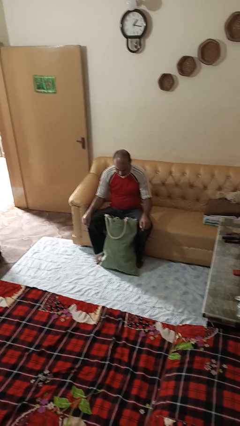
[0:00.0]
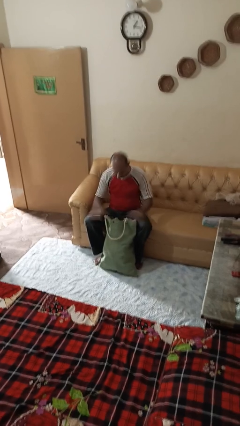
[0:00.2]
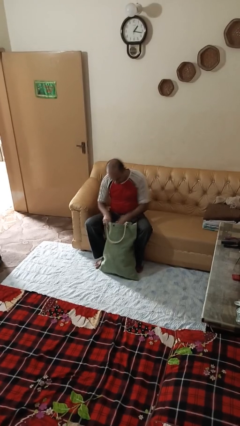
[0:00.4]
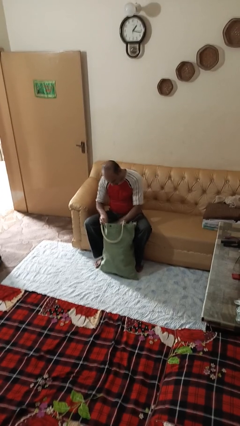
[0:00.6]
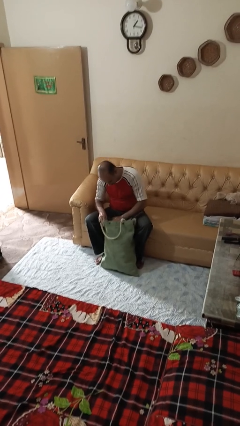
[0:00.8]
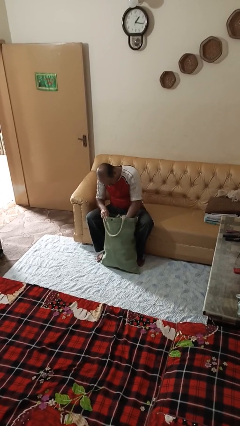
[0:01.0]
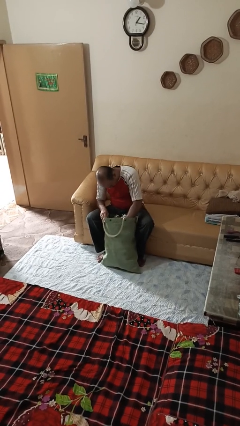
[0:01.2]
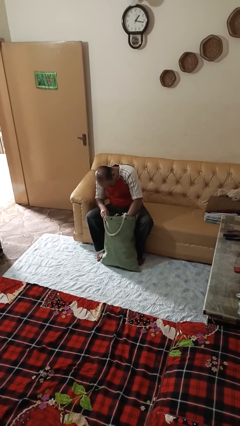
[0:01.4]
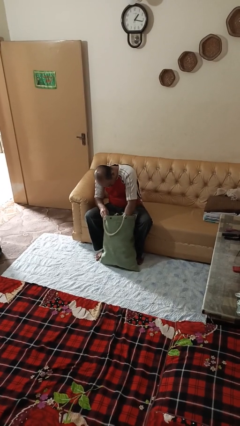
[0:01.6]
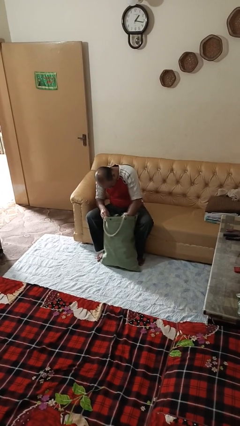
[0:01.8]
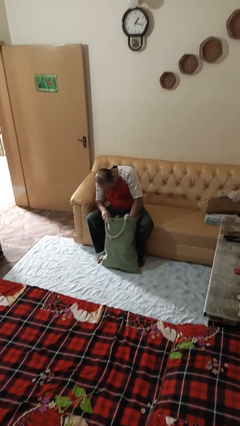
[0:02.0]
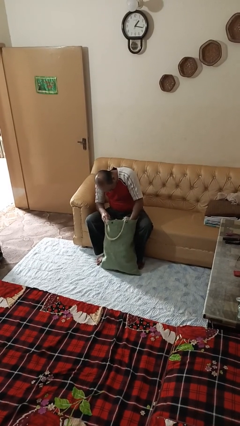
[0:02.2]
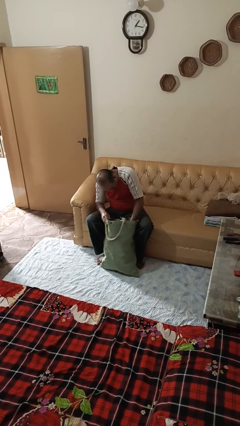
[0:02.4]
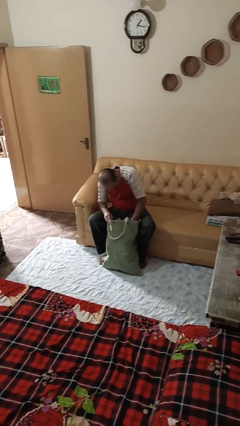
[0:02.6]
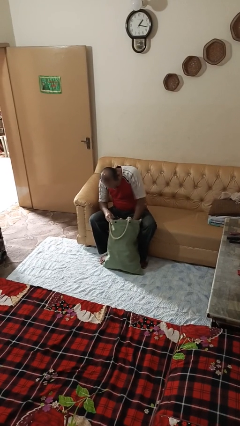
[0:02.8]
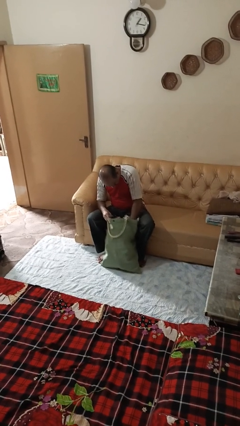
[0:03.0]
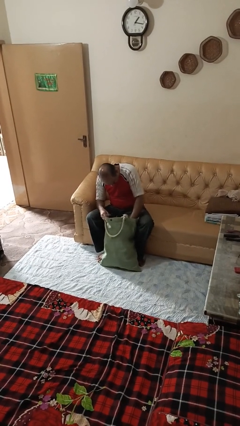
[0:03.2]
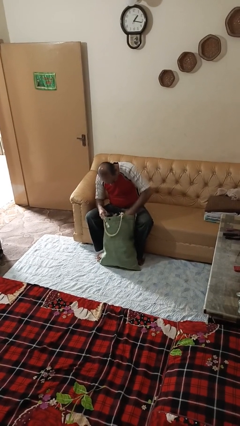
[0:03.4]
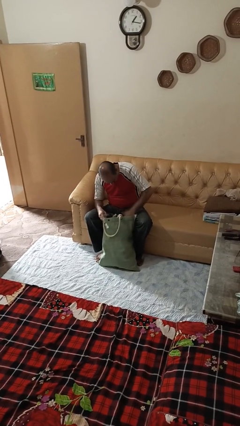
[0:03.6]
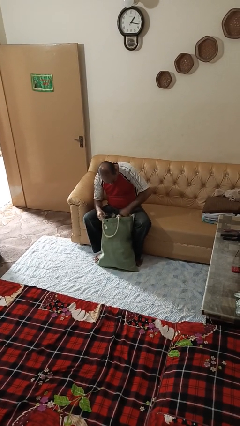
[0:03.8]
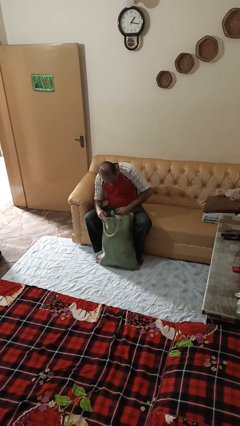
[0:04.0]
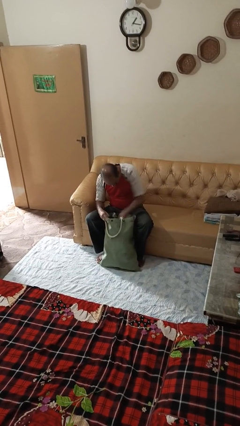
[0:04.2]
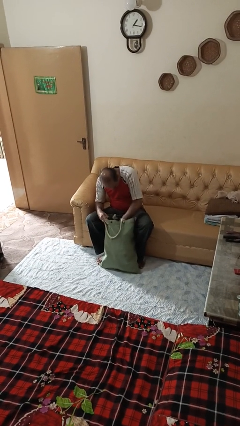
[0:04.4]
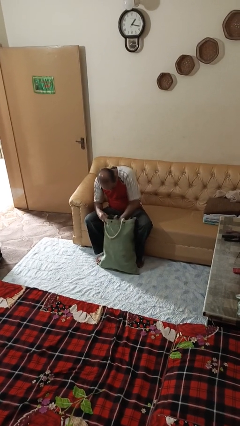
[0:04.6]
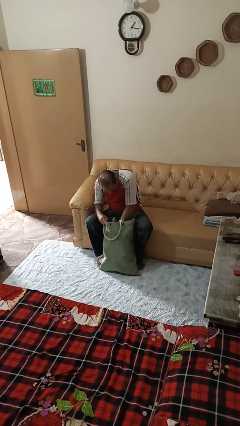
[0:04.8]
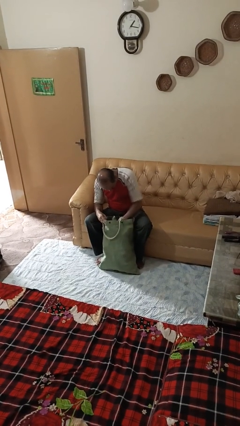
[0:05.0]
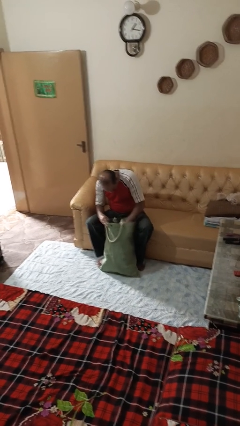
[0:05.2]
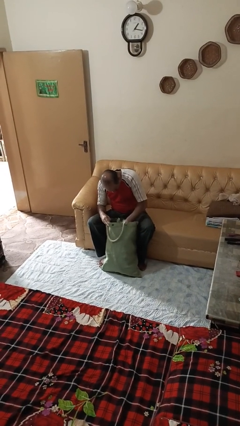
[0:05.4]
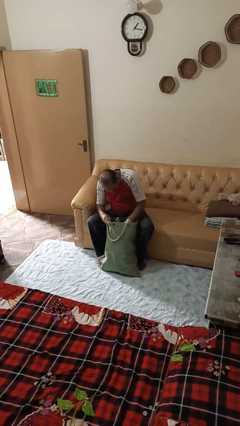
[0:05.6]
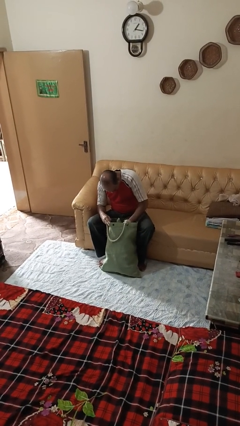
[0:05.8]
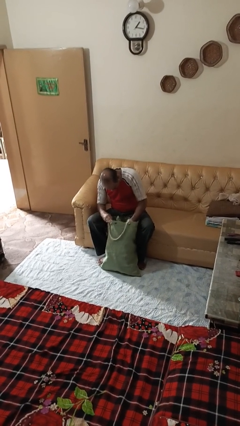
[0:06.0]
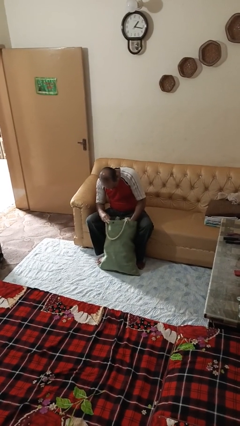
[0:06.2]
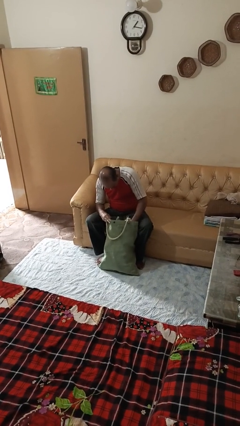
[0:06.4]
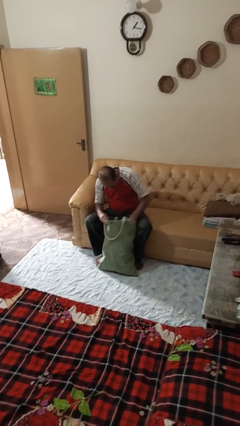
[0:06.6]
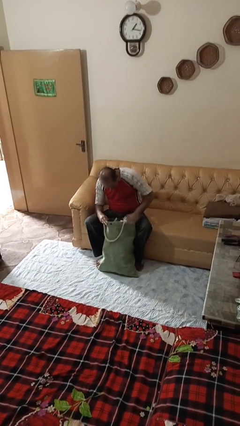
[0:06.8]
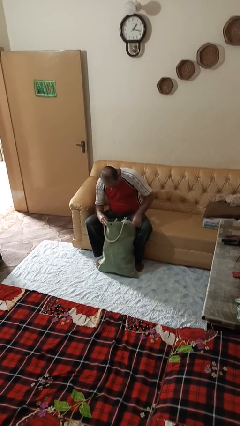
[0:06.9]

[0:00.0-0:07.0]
person searches in bag

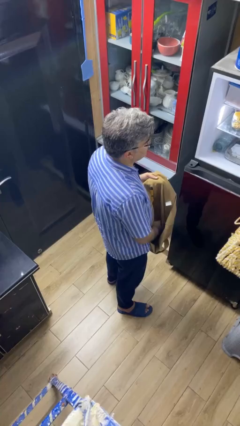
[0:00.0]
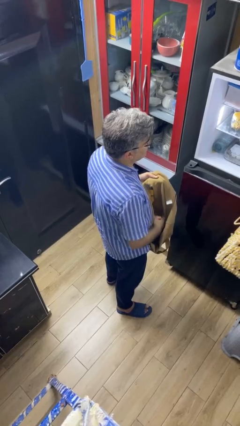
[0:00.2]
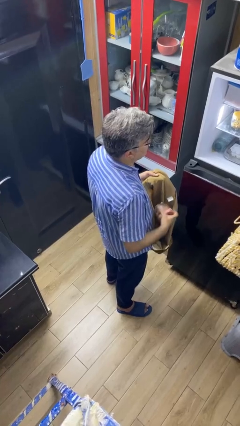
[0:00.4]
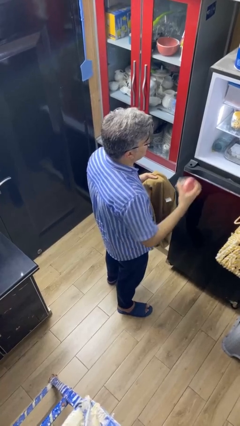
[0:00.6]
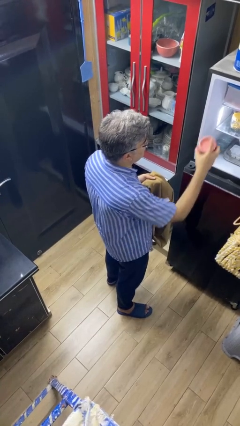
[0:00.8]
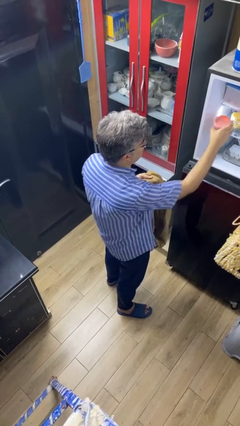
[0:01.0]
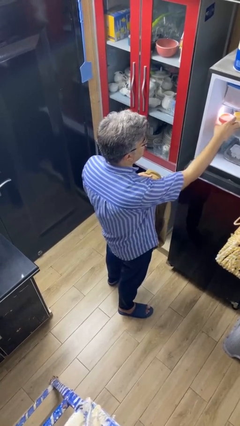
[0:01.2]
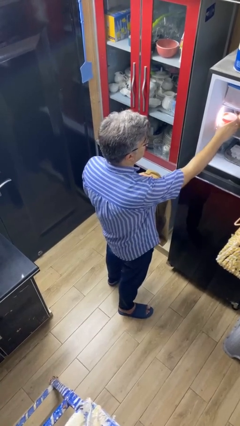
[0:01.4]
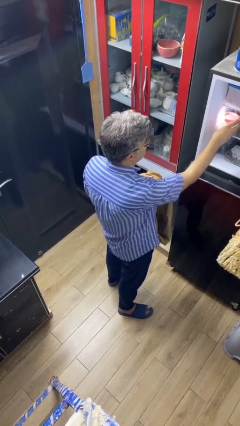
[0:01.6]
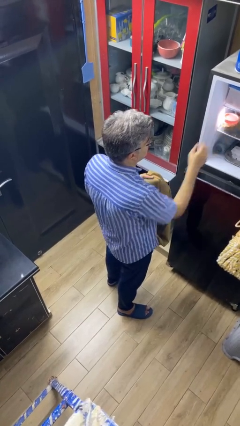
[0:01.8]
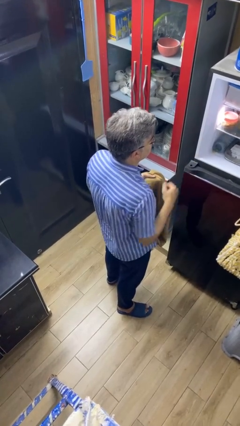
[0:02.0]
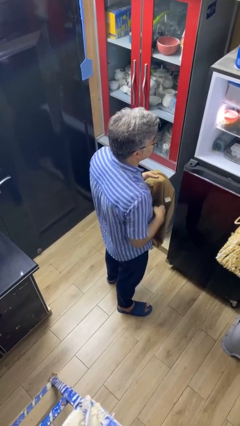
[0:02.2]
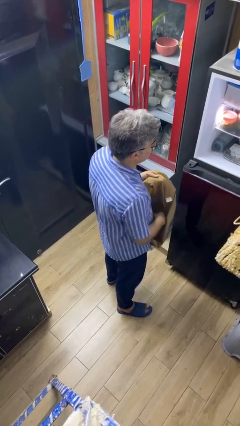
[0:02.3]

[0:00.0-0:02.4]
person loads groceries into refrigerator

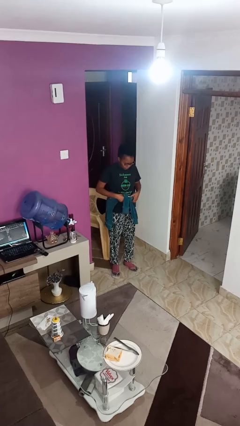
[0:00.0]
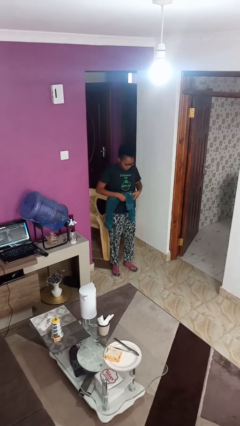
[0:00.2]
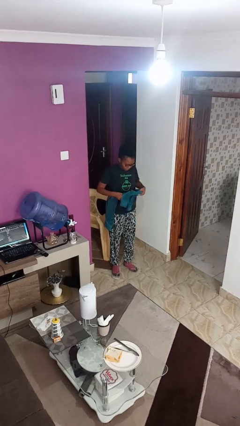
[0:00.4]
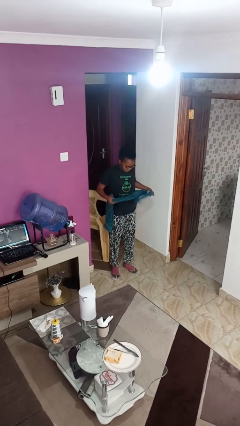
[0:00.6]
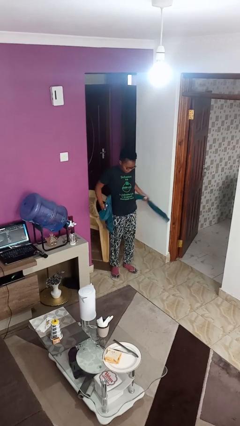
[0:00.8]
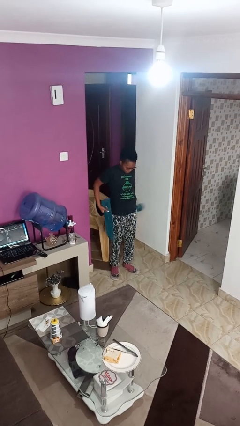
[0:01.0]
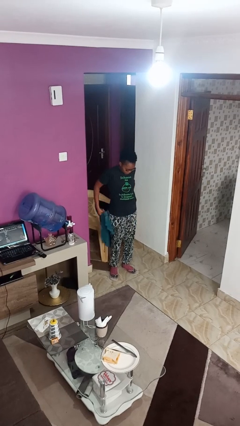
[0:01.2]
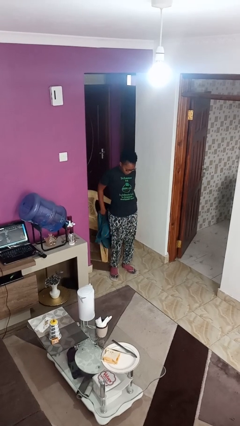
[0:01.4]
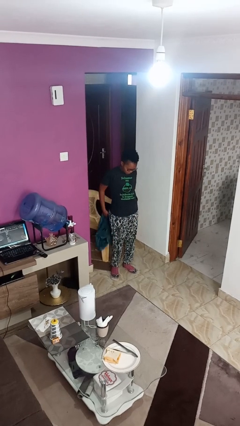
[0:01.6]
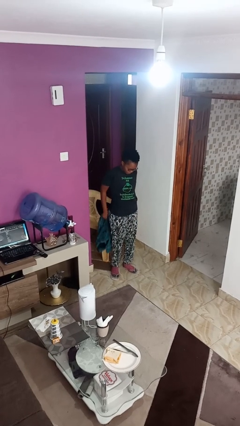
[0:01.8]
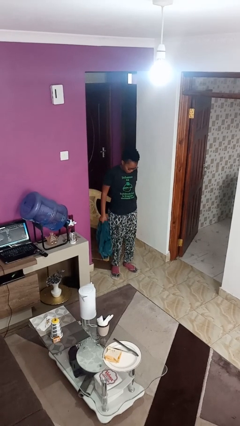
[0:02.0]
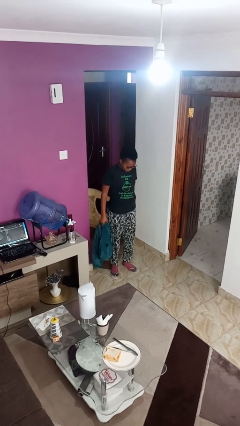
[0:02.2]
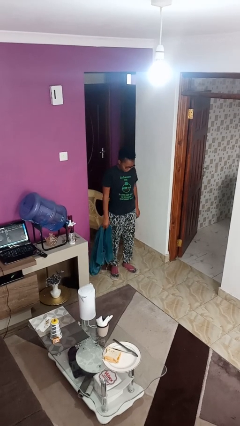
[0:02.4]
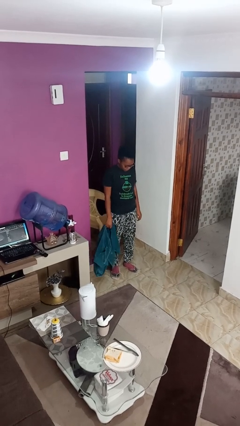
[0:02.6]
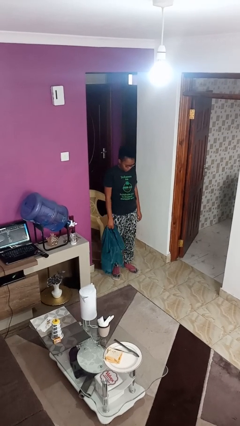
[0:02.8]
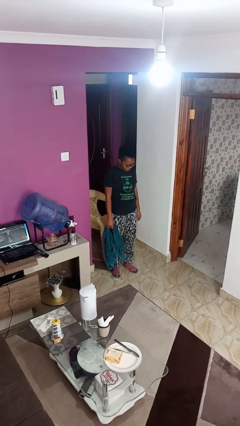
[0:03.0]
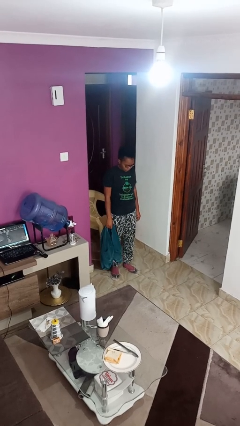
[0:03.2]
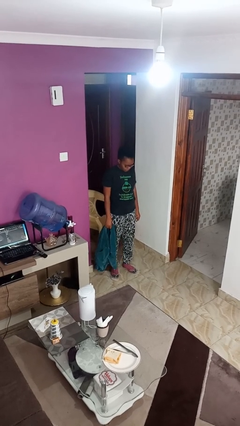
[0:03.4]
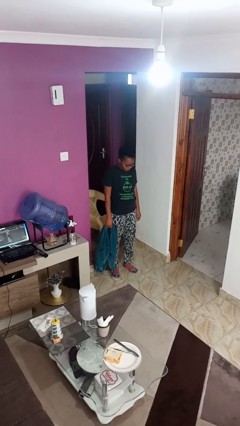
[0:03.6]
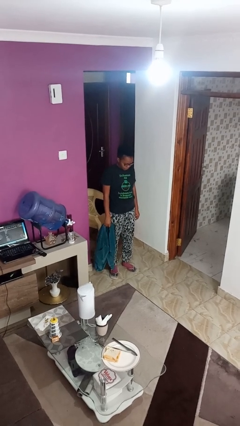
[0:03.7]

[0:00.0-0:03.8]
person unties jacket around waist

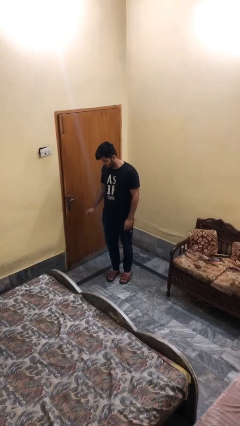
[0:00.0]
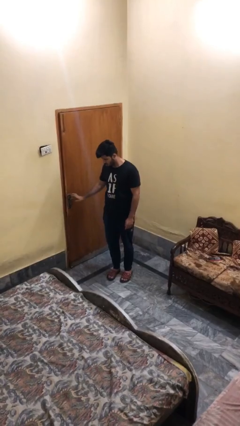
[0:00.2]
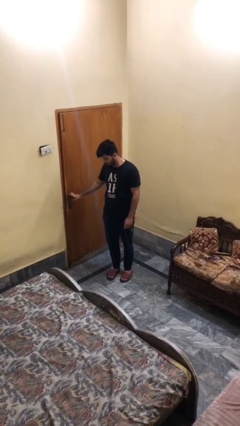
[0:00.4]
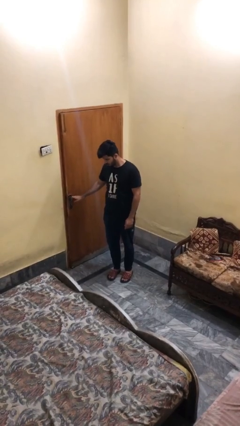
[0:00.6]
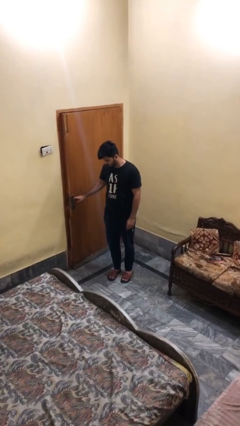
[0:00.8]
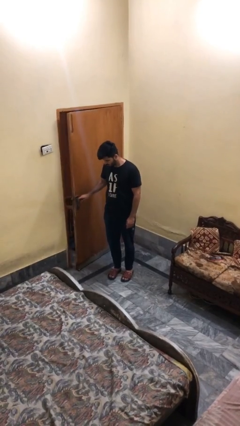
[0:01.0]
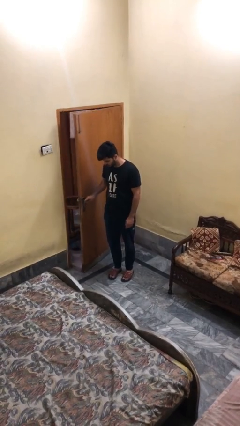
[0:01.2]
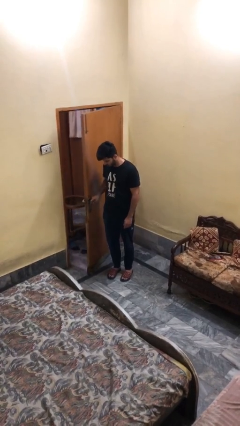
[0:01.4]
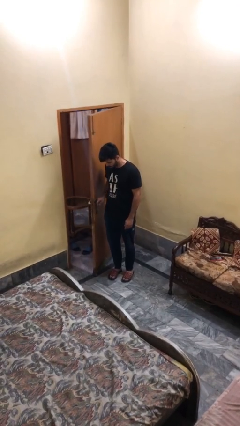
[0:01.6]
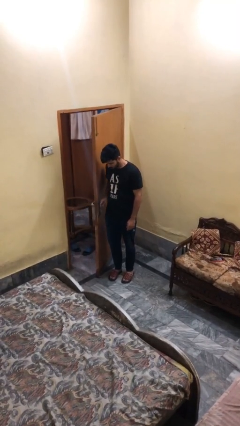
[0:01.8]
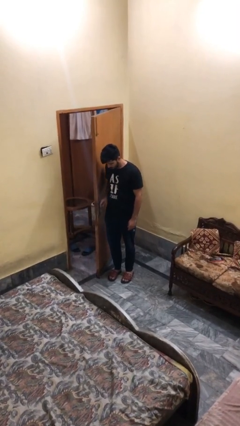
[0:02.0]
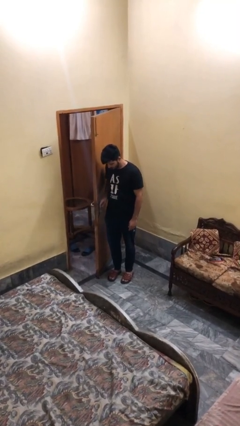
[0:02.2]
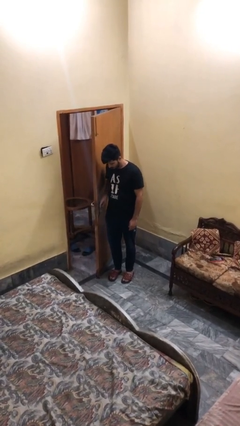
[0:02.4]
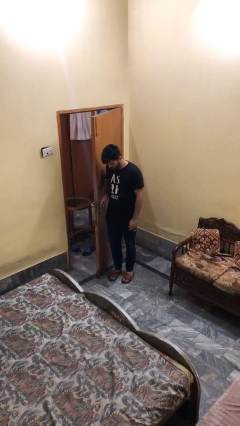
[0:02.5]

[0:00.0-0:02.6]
person opens facility door

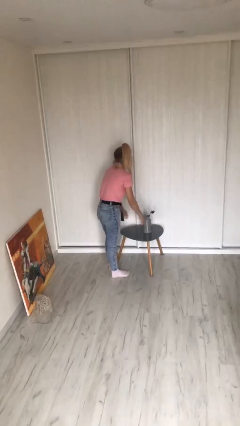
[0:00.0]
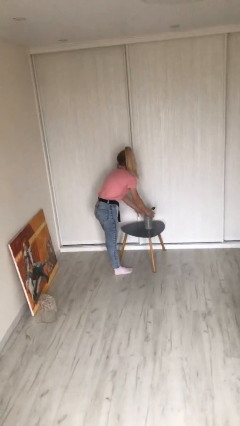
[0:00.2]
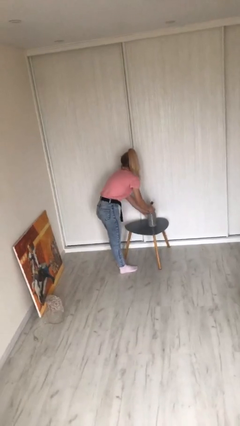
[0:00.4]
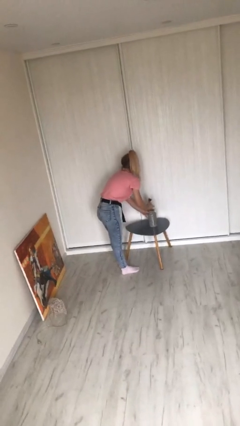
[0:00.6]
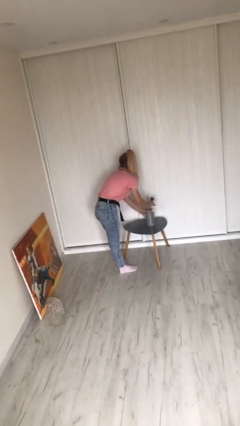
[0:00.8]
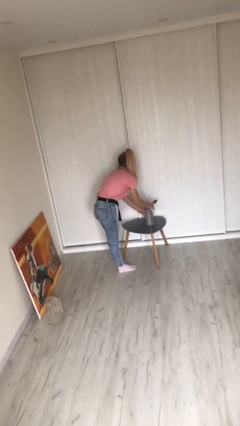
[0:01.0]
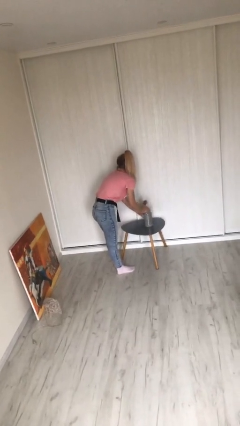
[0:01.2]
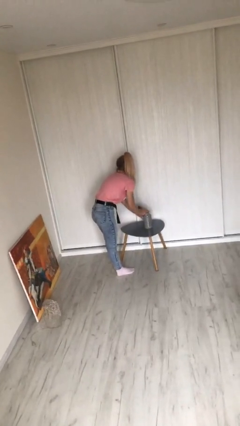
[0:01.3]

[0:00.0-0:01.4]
person arranges flowers in vase
